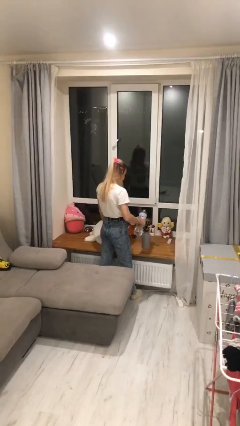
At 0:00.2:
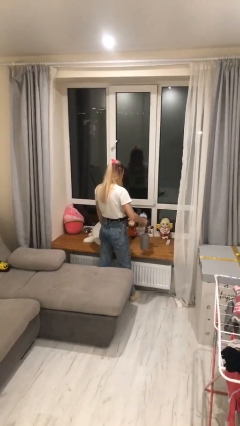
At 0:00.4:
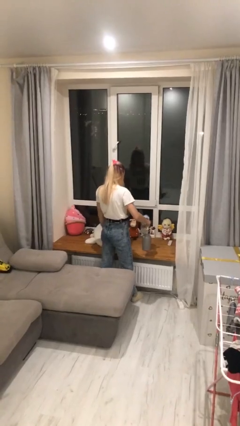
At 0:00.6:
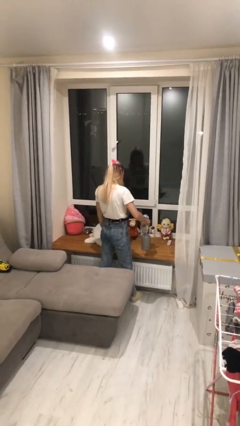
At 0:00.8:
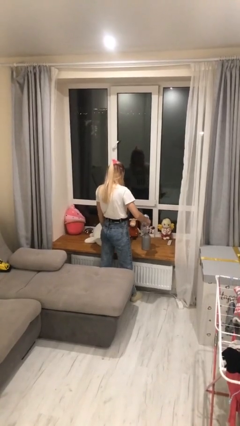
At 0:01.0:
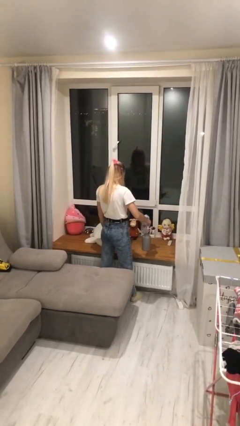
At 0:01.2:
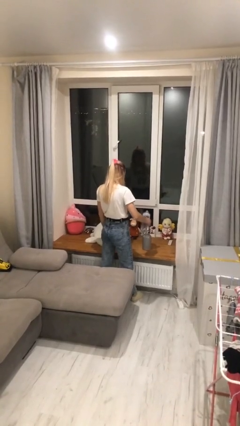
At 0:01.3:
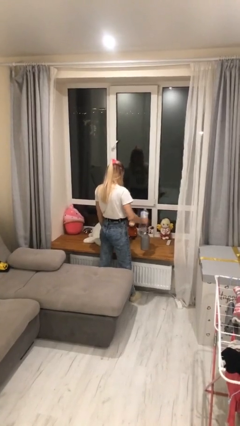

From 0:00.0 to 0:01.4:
person waters houseplant

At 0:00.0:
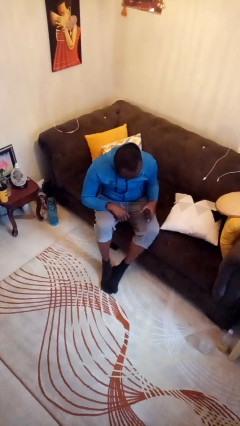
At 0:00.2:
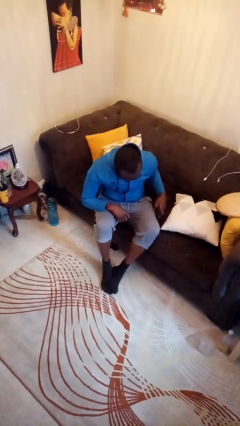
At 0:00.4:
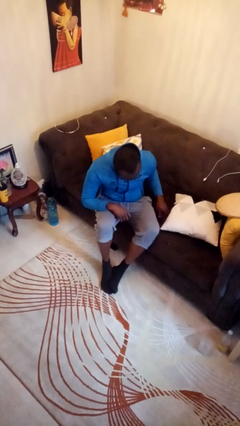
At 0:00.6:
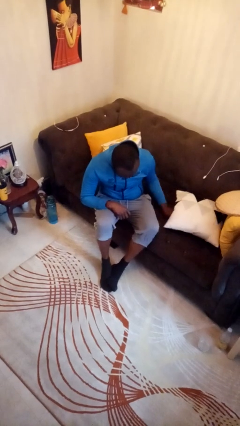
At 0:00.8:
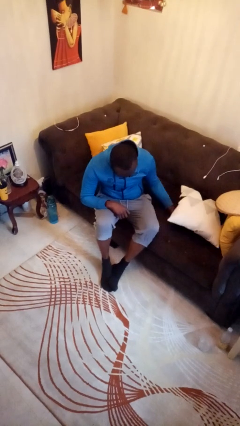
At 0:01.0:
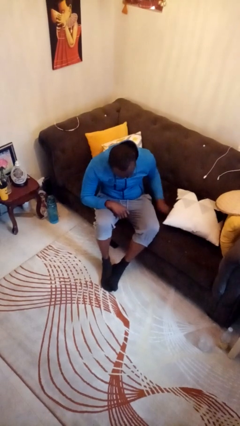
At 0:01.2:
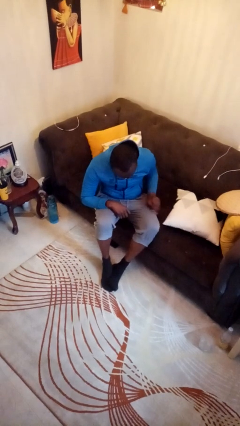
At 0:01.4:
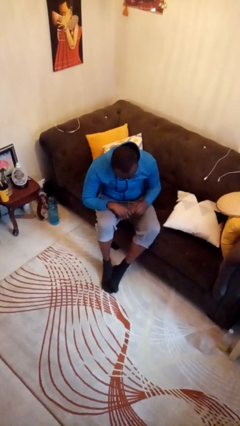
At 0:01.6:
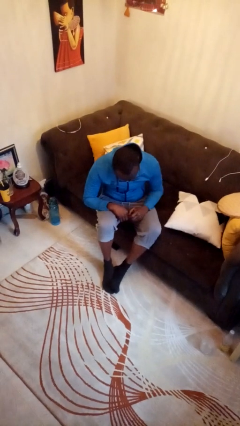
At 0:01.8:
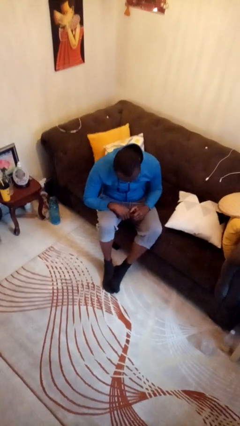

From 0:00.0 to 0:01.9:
person searches under couch

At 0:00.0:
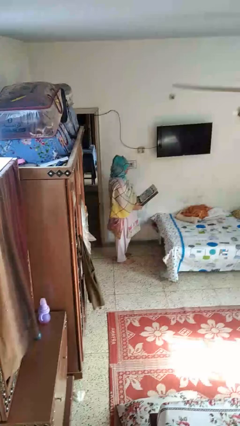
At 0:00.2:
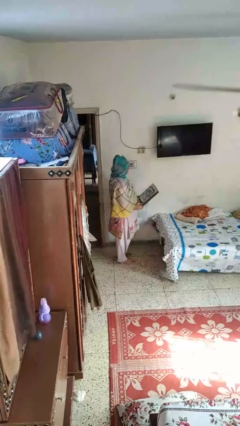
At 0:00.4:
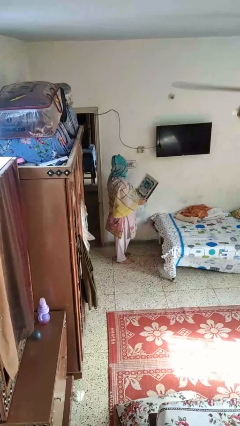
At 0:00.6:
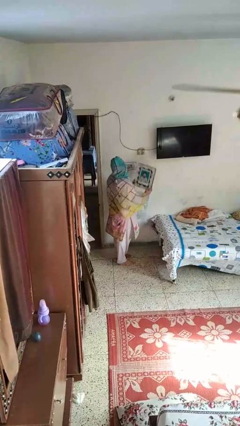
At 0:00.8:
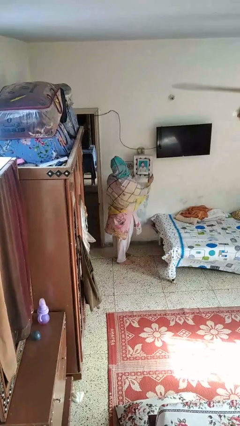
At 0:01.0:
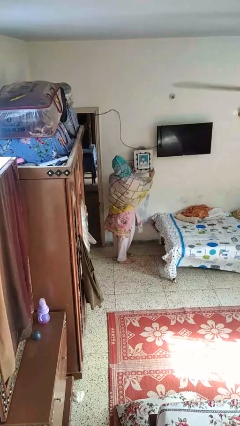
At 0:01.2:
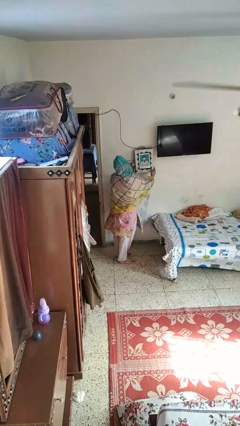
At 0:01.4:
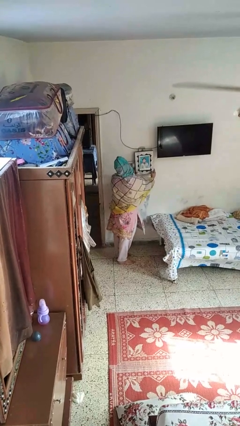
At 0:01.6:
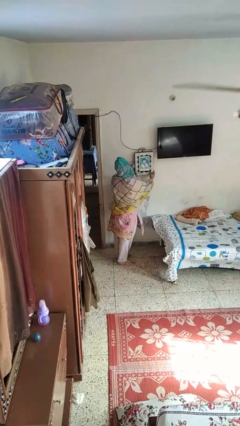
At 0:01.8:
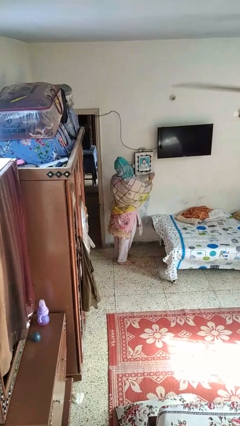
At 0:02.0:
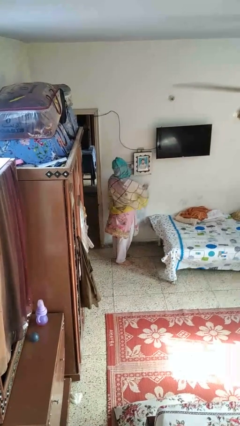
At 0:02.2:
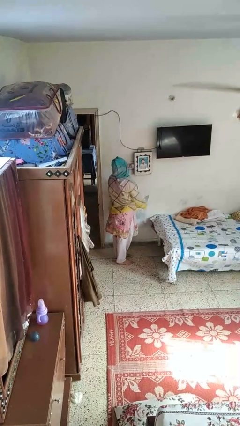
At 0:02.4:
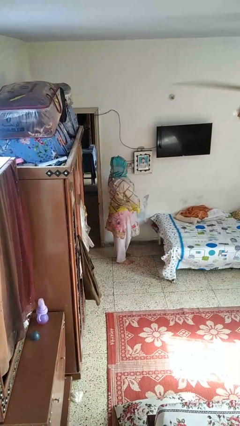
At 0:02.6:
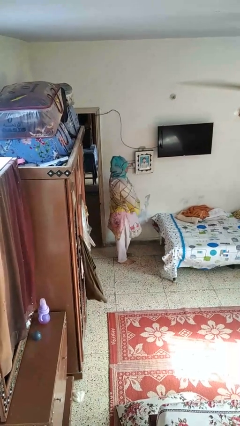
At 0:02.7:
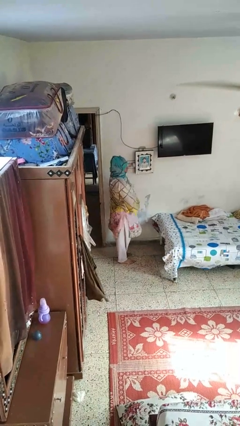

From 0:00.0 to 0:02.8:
person puts up picture frame

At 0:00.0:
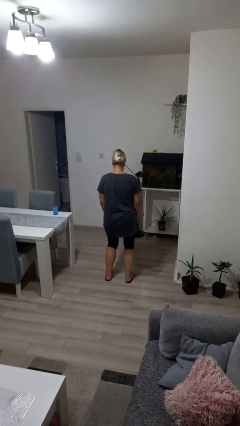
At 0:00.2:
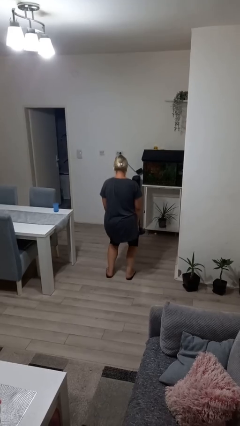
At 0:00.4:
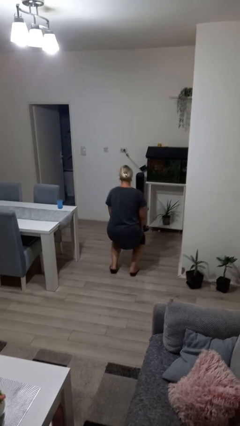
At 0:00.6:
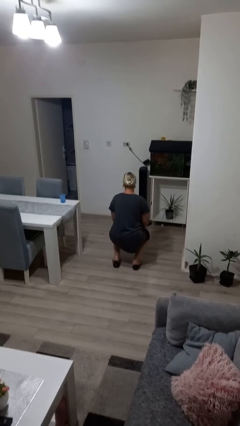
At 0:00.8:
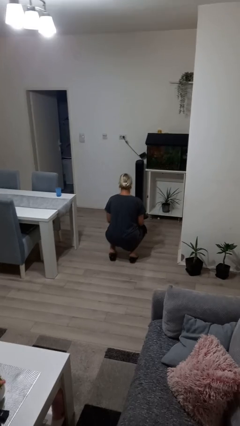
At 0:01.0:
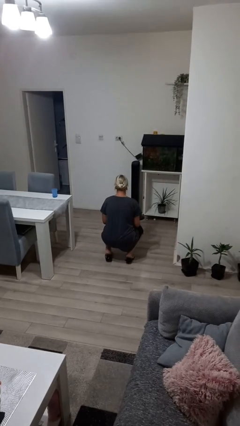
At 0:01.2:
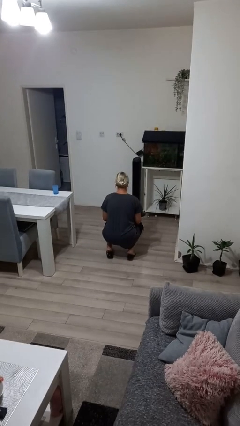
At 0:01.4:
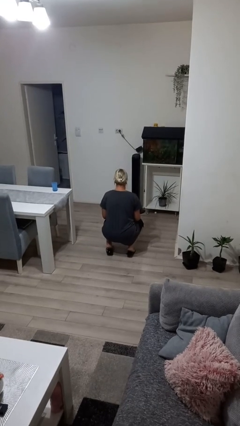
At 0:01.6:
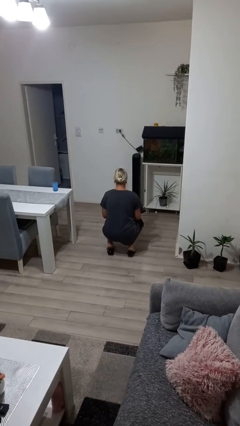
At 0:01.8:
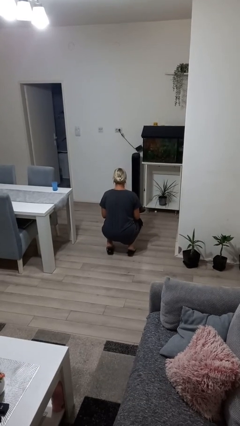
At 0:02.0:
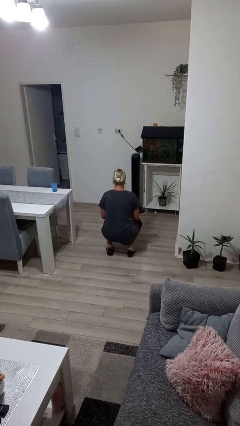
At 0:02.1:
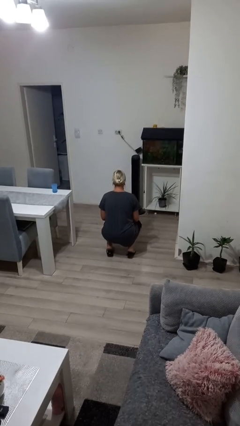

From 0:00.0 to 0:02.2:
person squats

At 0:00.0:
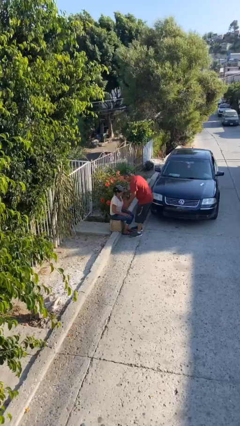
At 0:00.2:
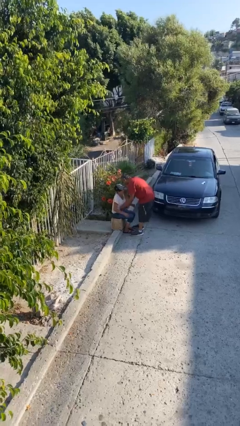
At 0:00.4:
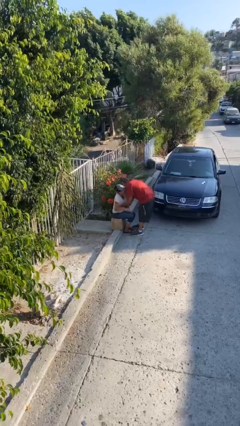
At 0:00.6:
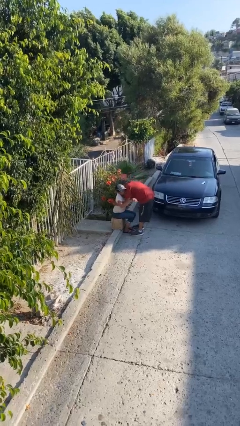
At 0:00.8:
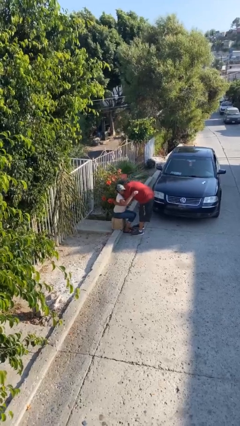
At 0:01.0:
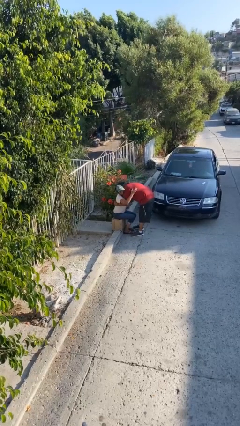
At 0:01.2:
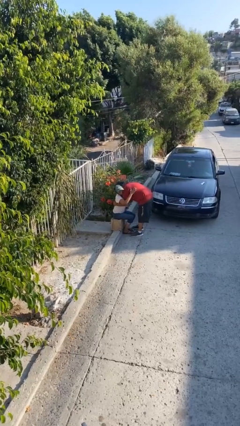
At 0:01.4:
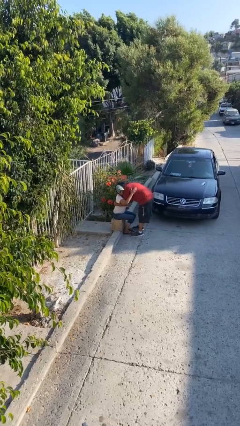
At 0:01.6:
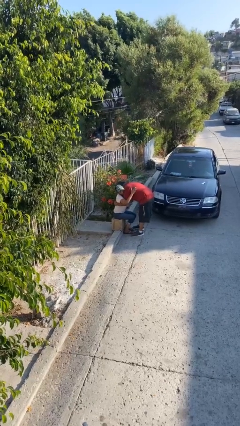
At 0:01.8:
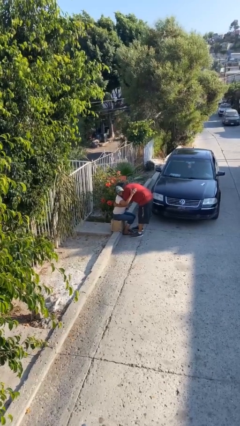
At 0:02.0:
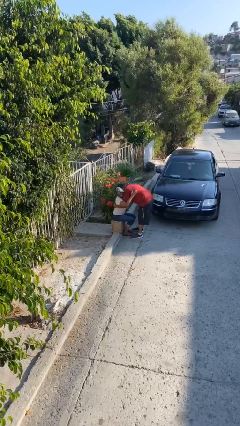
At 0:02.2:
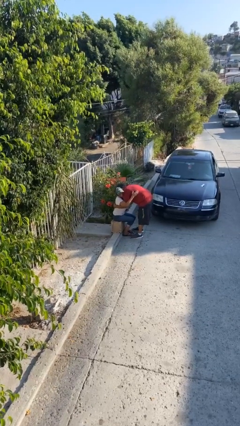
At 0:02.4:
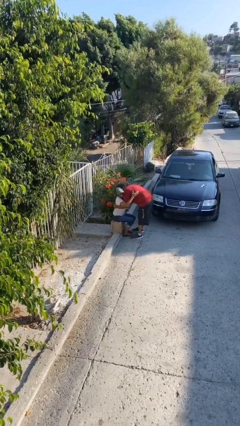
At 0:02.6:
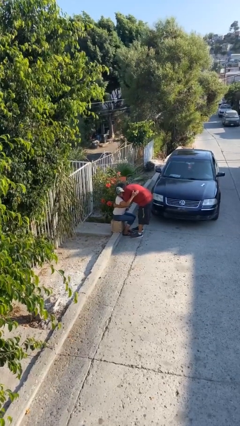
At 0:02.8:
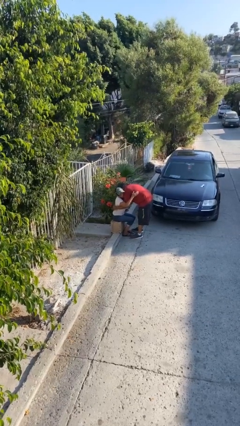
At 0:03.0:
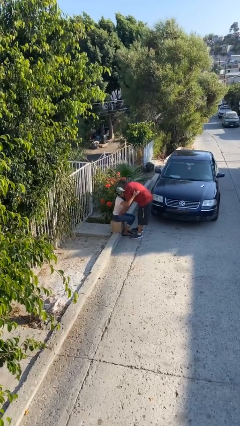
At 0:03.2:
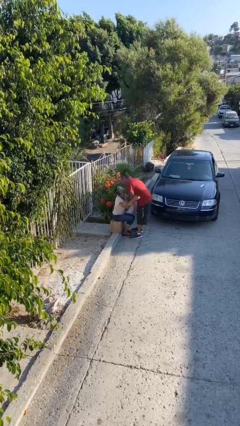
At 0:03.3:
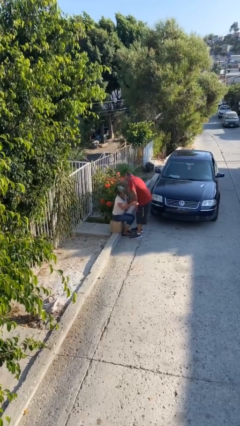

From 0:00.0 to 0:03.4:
person embraces person

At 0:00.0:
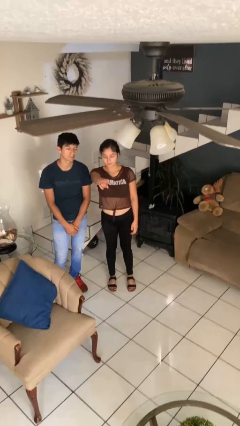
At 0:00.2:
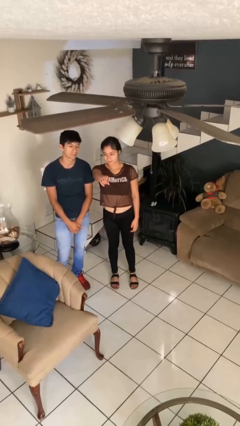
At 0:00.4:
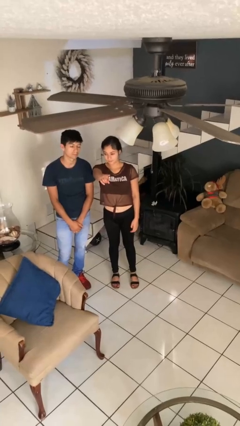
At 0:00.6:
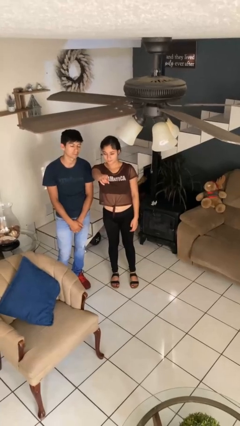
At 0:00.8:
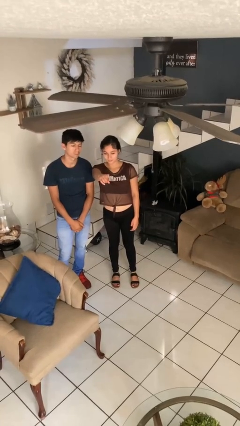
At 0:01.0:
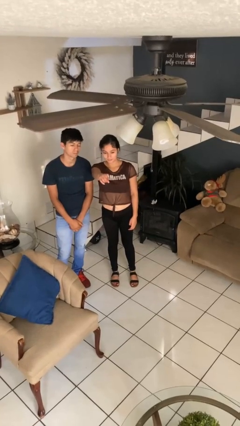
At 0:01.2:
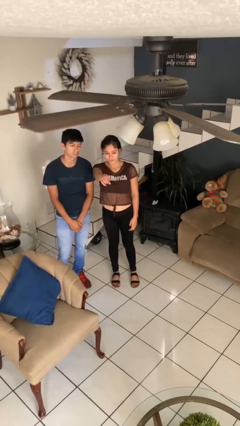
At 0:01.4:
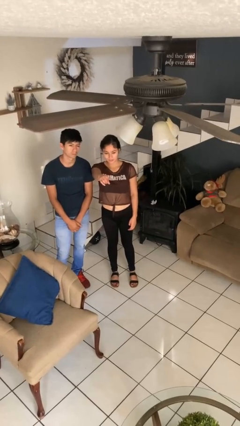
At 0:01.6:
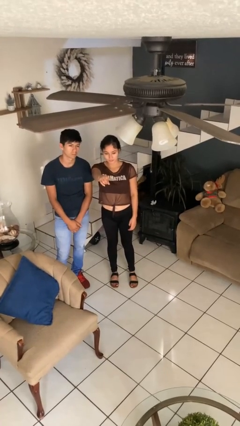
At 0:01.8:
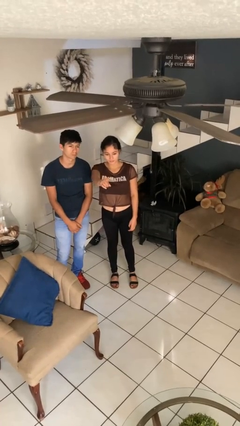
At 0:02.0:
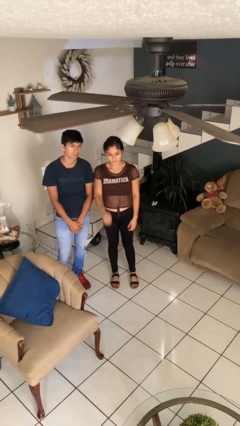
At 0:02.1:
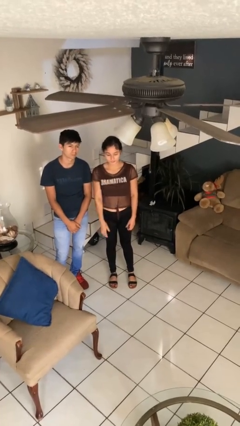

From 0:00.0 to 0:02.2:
person points at person

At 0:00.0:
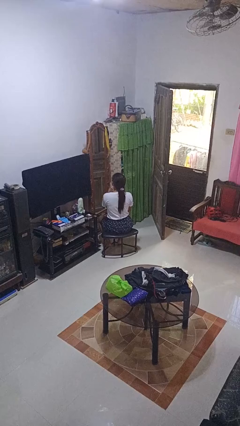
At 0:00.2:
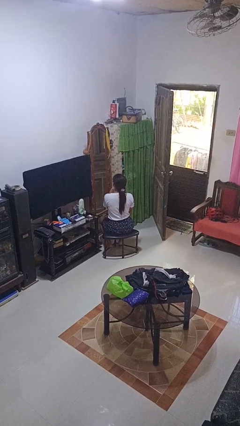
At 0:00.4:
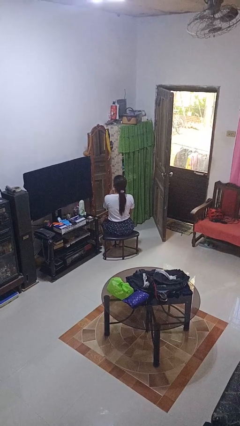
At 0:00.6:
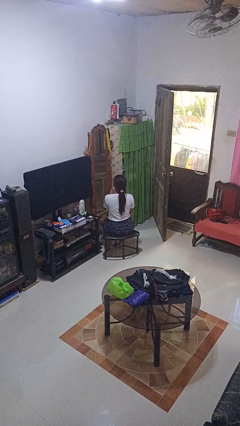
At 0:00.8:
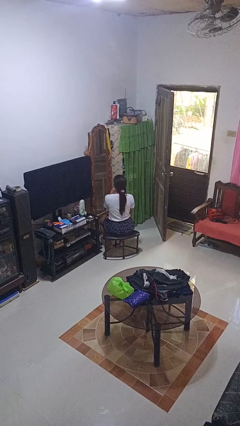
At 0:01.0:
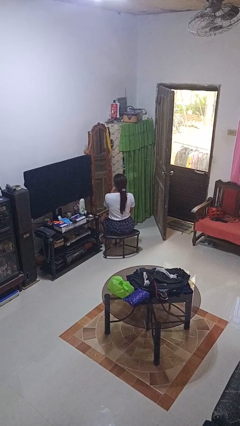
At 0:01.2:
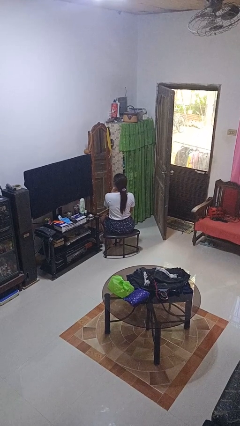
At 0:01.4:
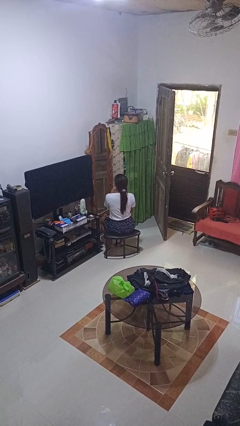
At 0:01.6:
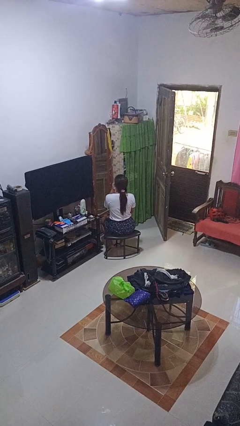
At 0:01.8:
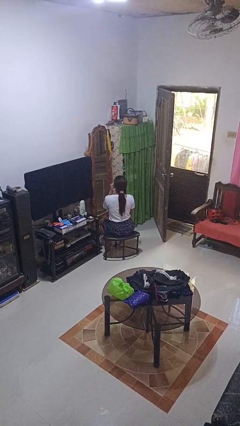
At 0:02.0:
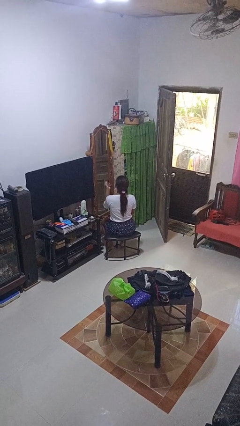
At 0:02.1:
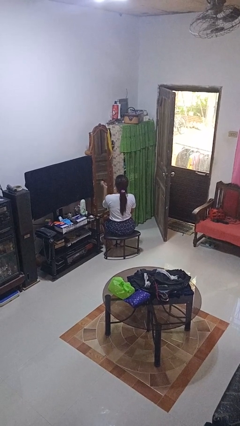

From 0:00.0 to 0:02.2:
person applies lip makeup

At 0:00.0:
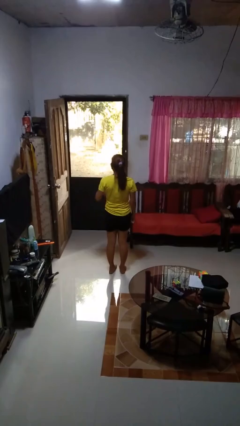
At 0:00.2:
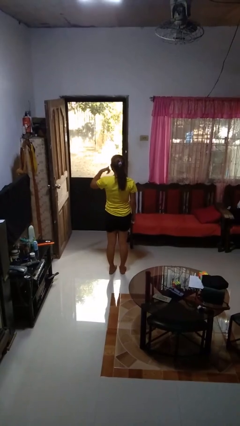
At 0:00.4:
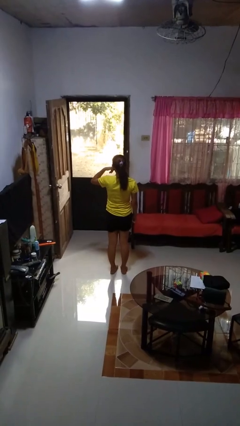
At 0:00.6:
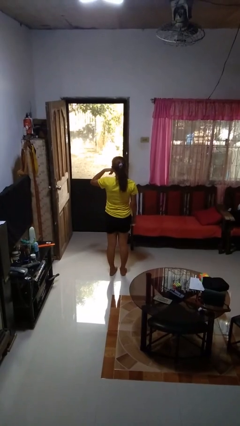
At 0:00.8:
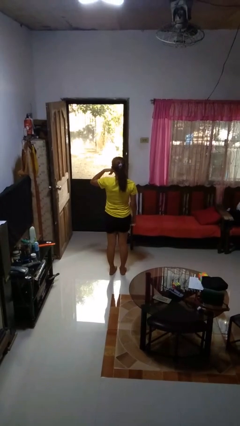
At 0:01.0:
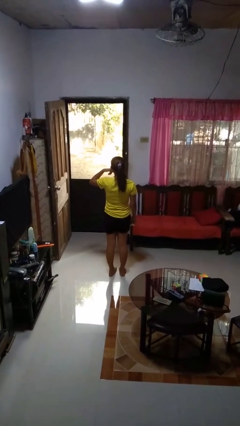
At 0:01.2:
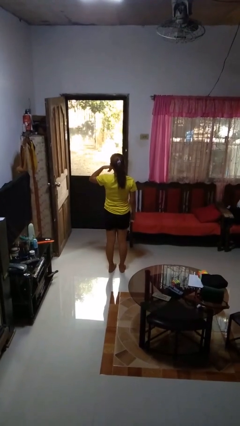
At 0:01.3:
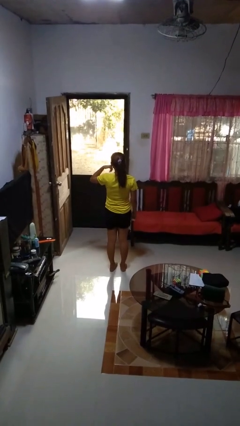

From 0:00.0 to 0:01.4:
person gestures call me
